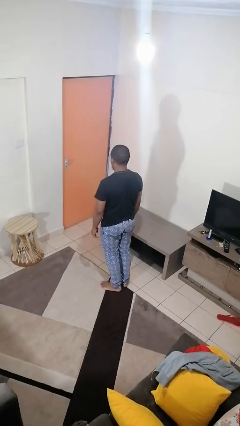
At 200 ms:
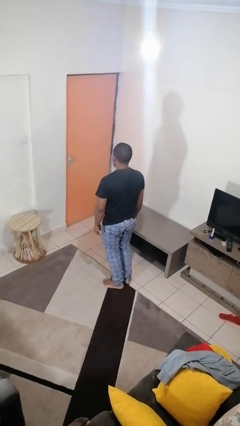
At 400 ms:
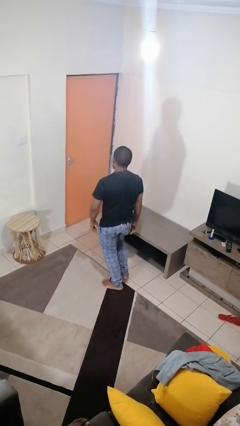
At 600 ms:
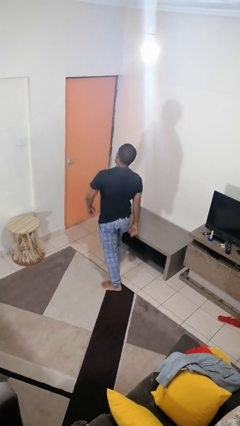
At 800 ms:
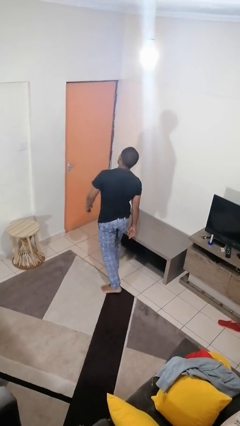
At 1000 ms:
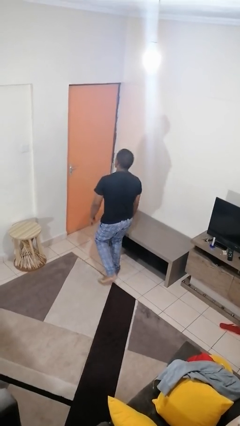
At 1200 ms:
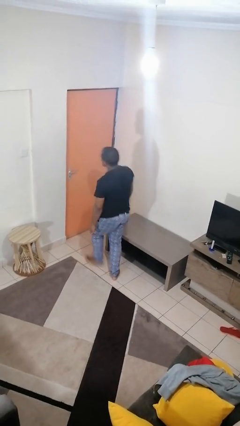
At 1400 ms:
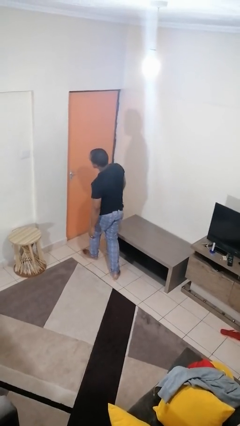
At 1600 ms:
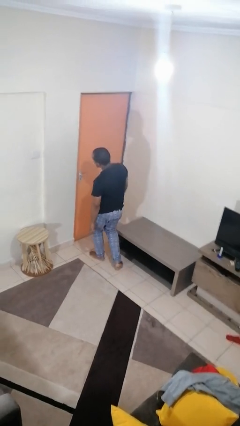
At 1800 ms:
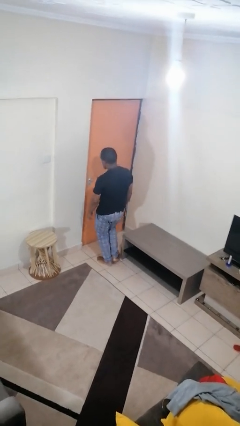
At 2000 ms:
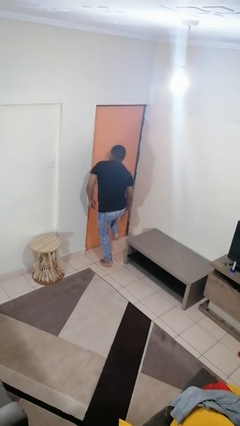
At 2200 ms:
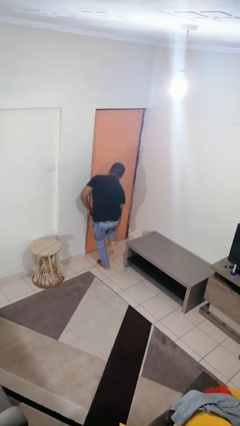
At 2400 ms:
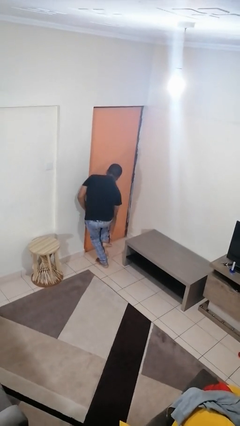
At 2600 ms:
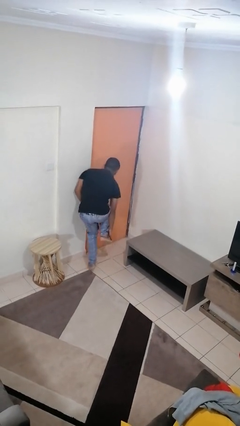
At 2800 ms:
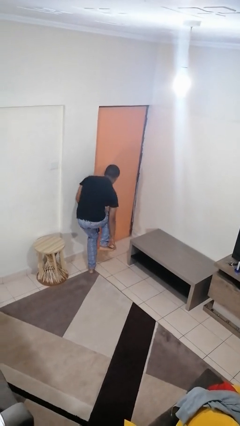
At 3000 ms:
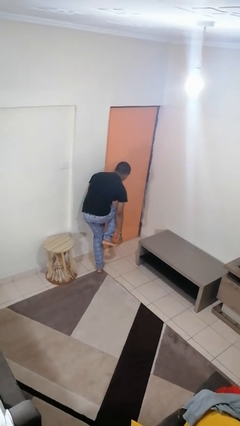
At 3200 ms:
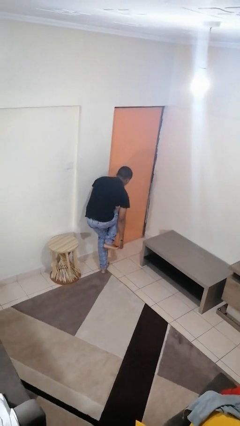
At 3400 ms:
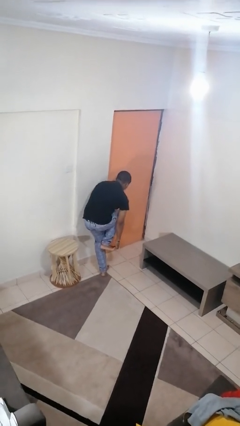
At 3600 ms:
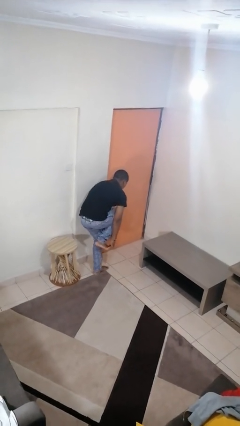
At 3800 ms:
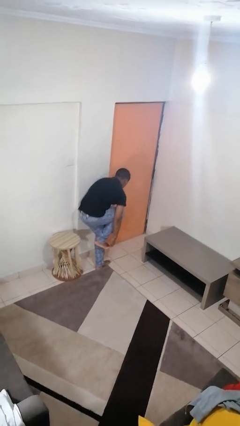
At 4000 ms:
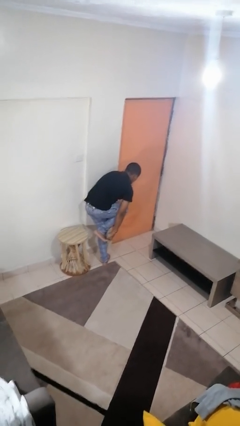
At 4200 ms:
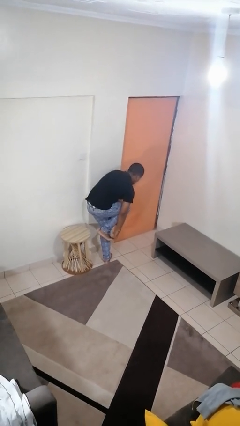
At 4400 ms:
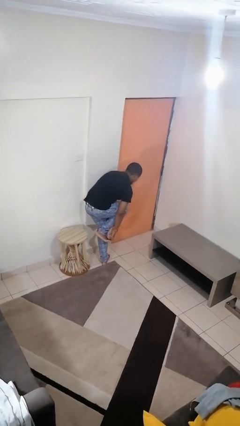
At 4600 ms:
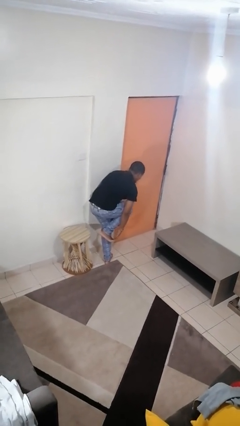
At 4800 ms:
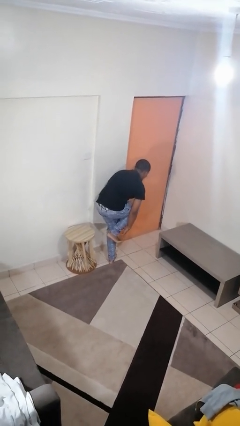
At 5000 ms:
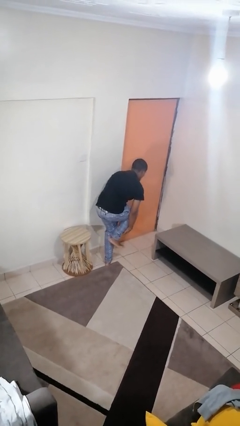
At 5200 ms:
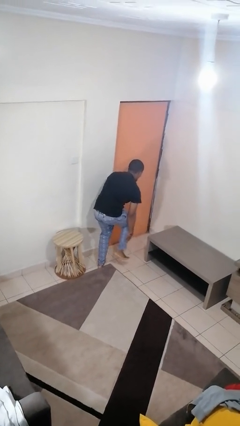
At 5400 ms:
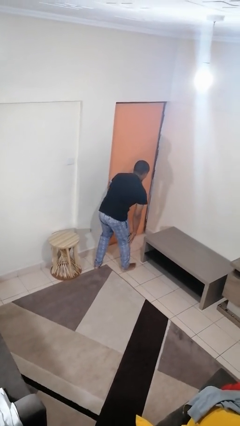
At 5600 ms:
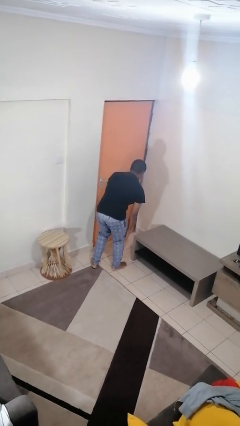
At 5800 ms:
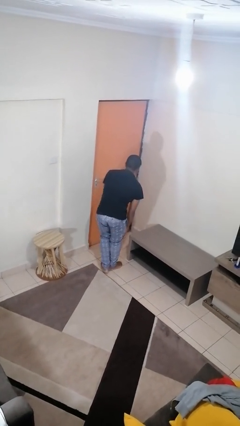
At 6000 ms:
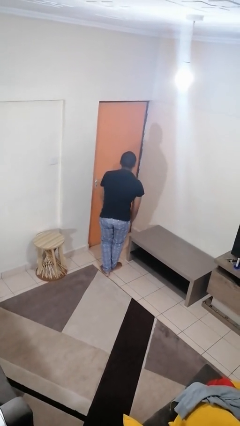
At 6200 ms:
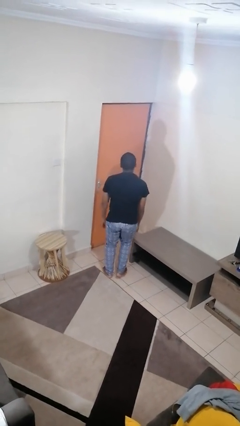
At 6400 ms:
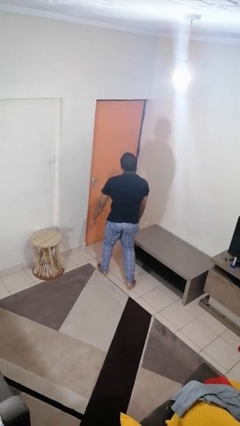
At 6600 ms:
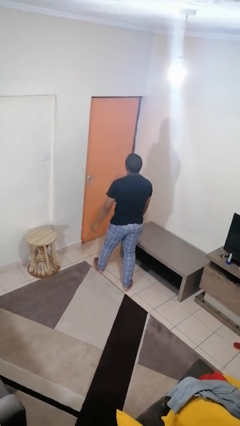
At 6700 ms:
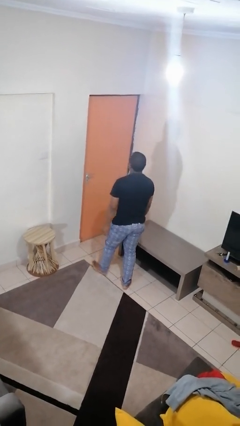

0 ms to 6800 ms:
person stubs toe

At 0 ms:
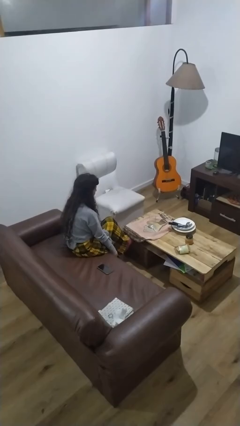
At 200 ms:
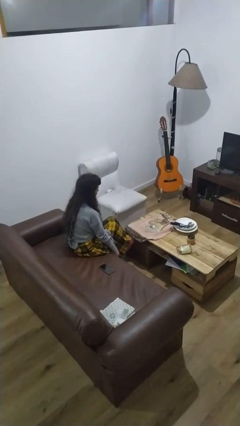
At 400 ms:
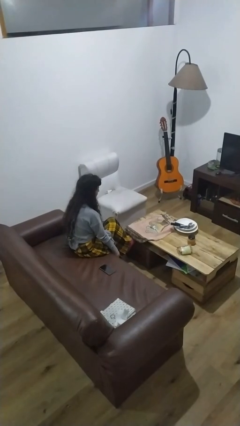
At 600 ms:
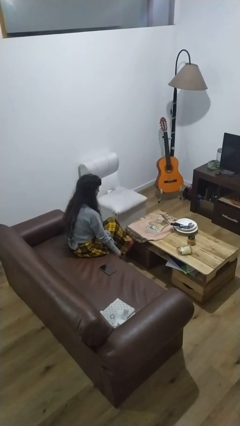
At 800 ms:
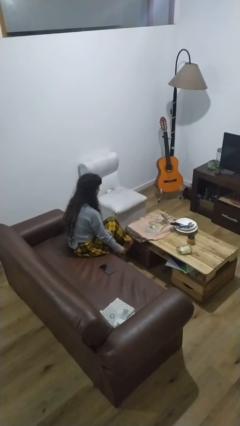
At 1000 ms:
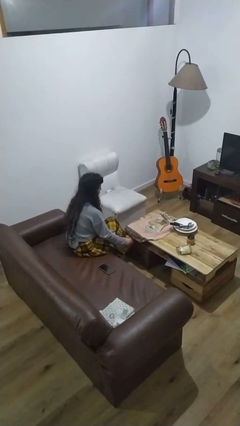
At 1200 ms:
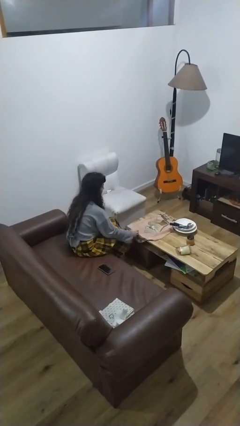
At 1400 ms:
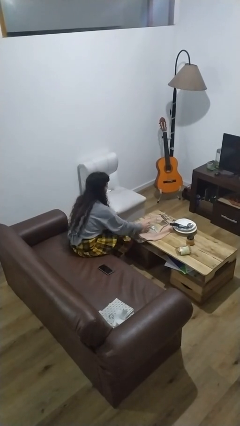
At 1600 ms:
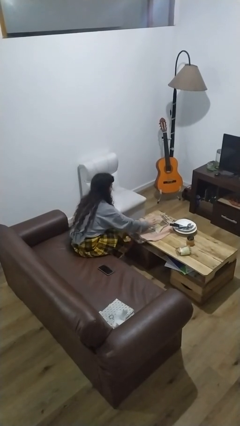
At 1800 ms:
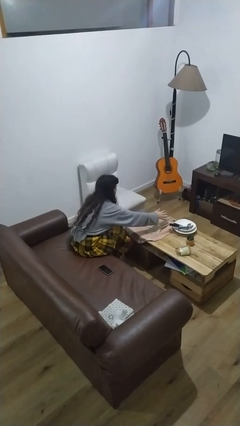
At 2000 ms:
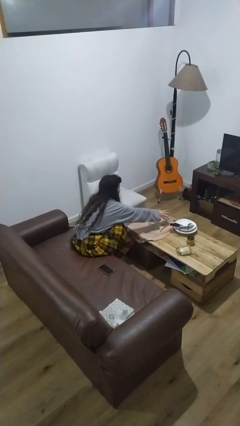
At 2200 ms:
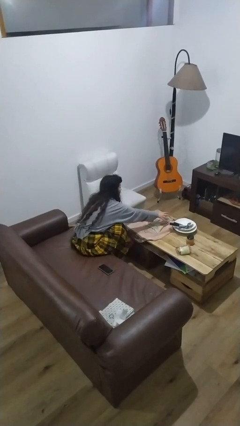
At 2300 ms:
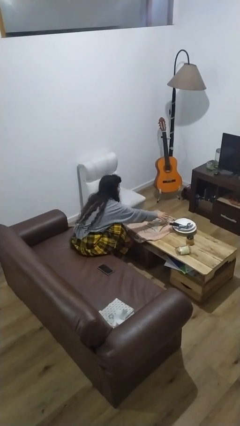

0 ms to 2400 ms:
person knocks over glass

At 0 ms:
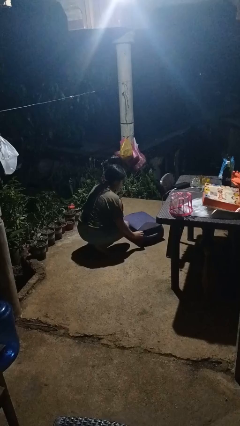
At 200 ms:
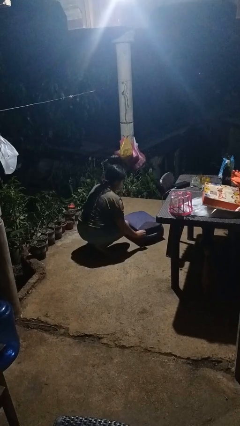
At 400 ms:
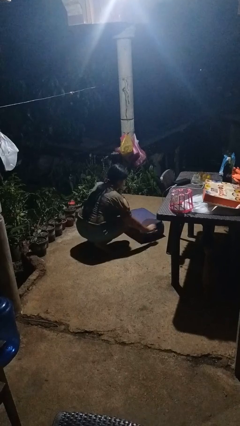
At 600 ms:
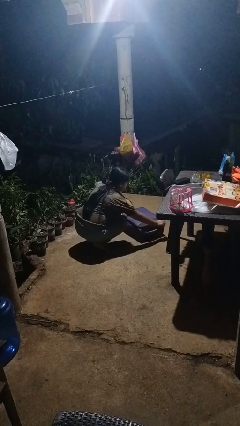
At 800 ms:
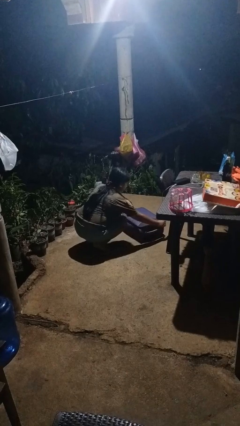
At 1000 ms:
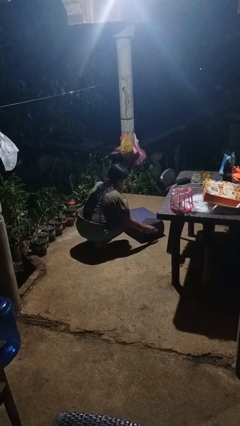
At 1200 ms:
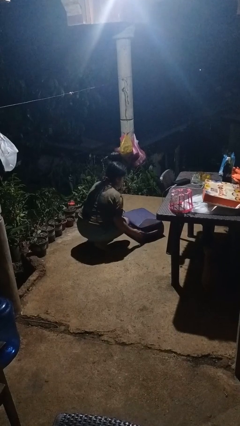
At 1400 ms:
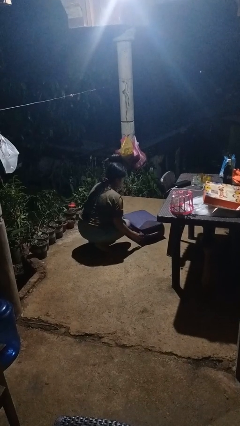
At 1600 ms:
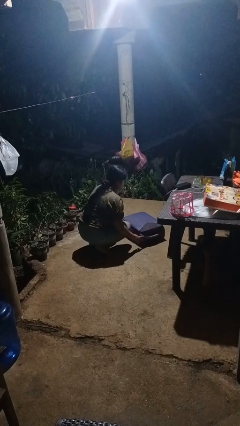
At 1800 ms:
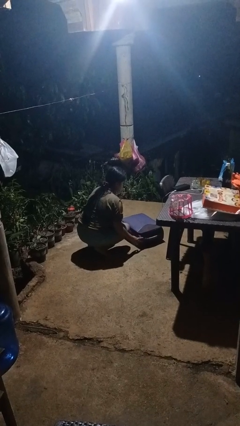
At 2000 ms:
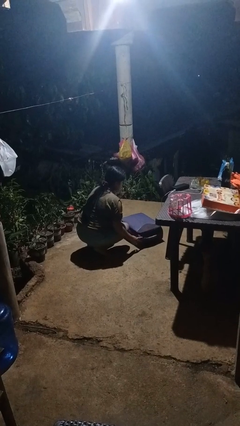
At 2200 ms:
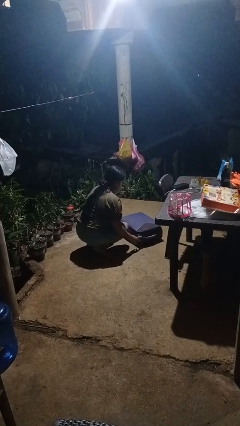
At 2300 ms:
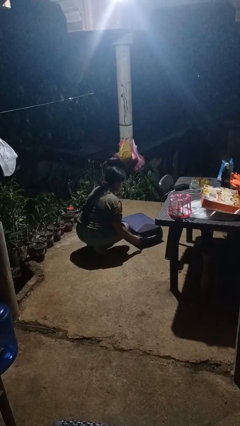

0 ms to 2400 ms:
person opens suitcase

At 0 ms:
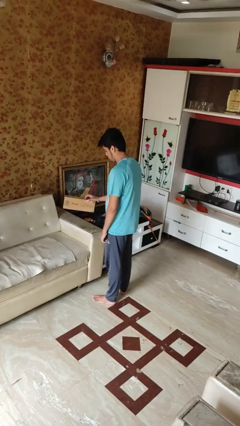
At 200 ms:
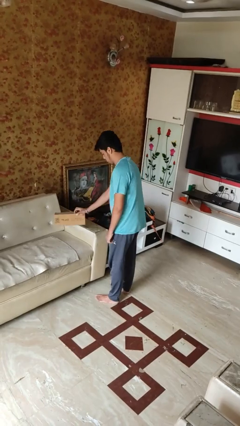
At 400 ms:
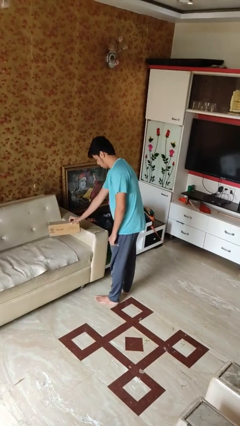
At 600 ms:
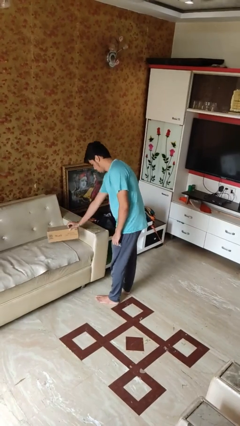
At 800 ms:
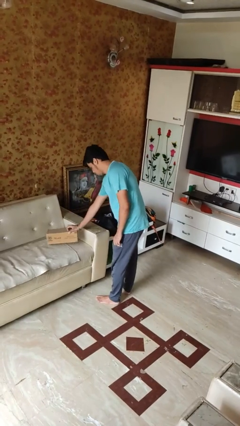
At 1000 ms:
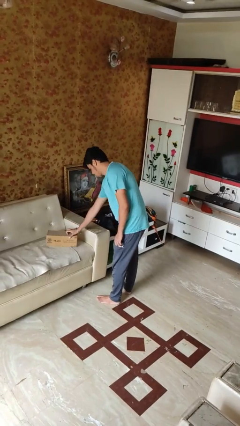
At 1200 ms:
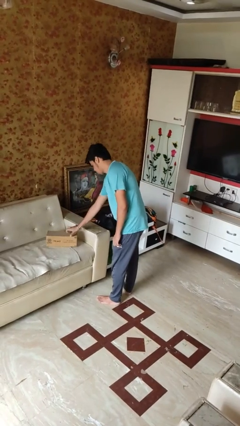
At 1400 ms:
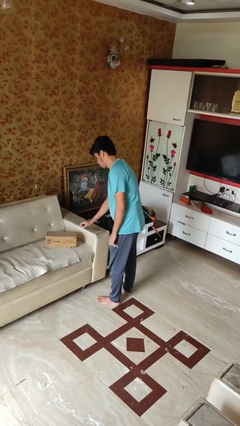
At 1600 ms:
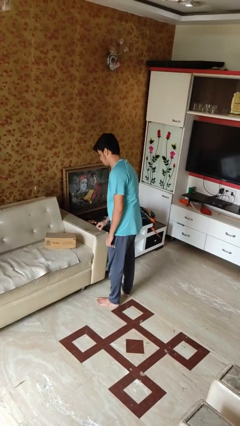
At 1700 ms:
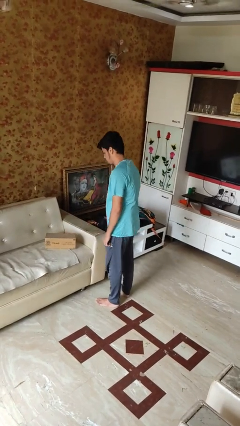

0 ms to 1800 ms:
person puts down object on couch

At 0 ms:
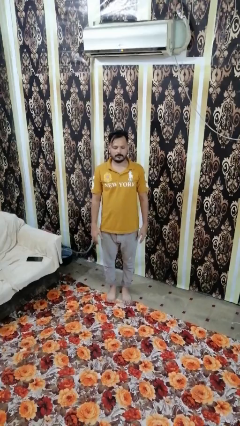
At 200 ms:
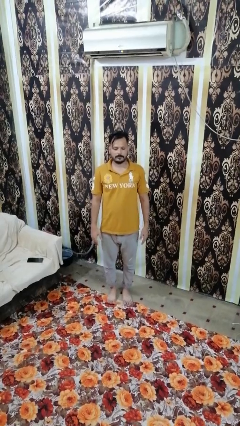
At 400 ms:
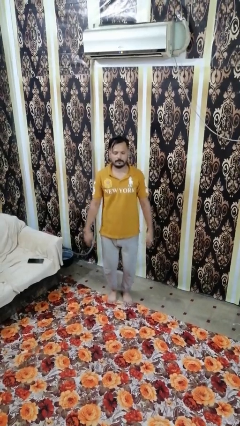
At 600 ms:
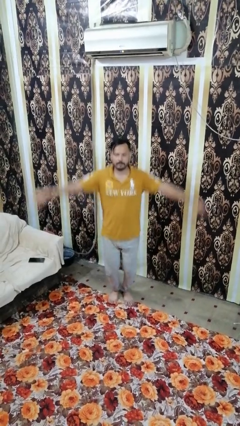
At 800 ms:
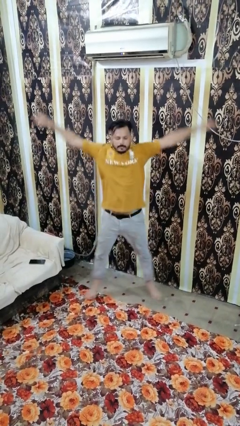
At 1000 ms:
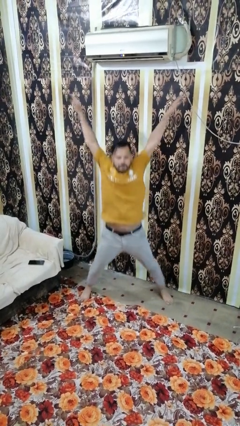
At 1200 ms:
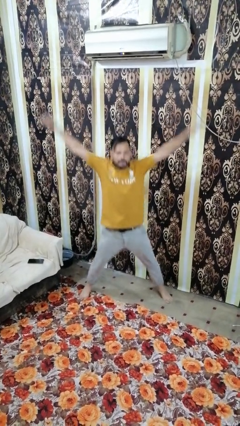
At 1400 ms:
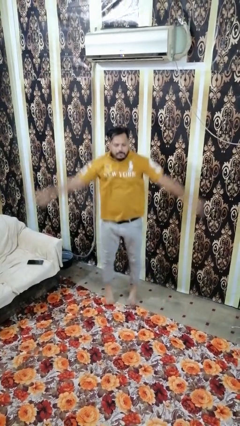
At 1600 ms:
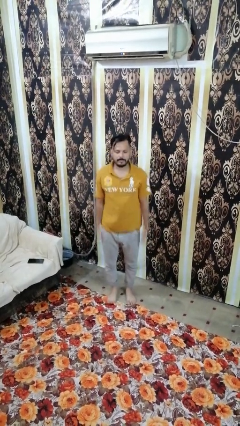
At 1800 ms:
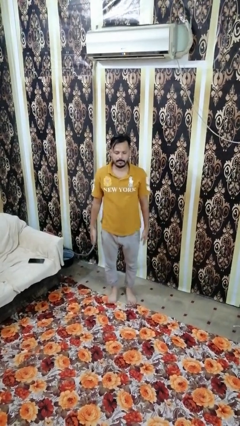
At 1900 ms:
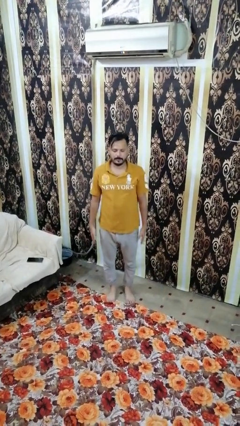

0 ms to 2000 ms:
person exercises with jumping jacks

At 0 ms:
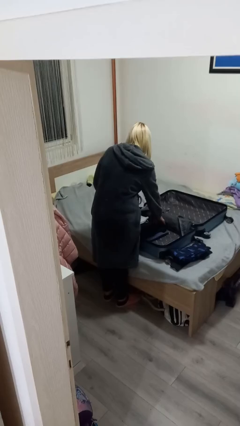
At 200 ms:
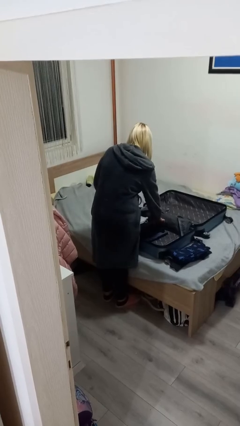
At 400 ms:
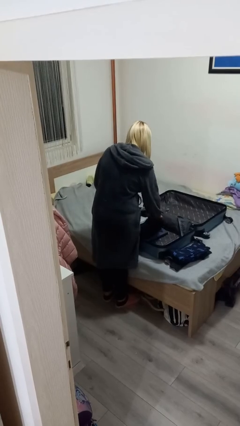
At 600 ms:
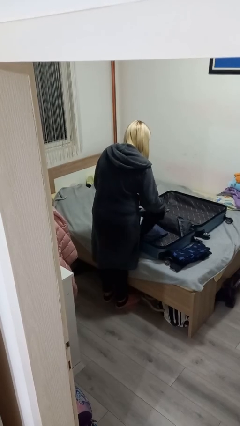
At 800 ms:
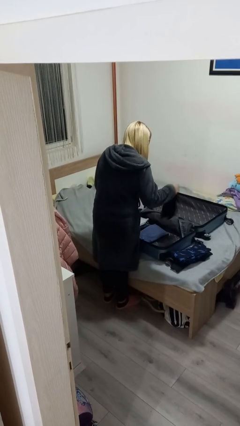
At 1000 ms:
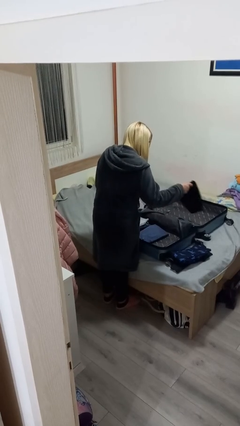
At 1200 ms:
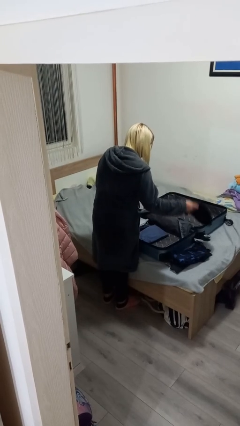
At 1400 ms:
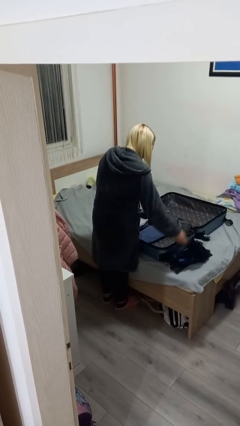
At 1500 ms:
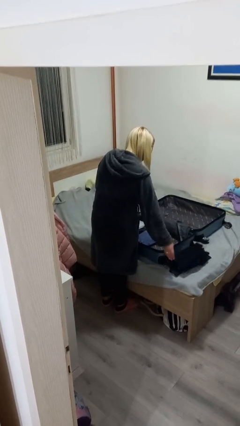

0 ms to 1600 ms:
person unloads clothes from suitcase

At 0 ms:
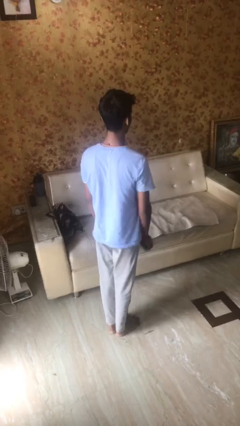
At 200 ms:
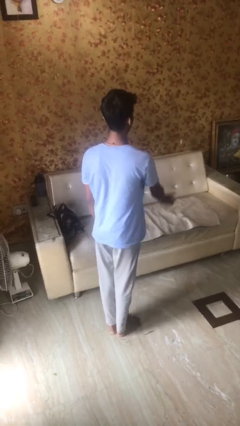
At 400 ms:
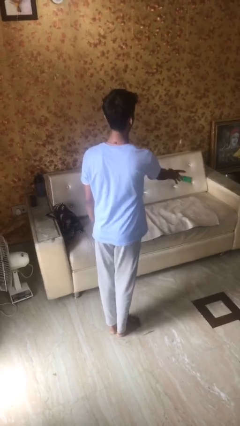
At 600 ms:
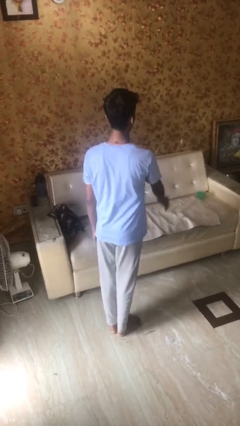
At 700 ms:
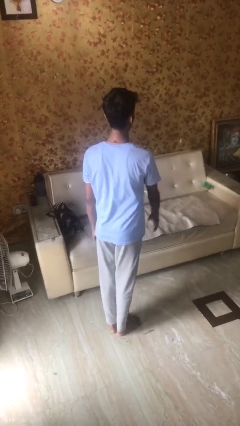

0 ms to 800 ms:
person throws object on bed
